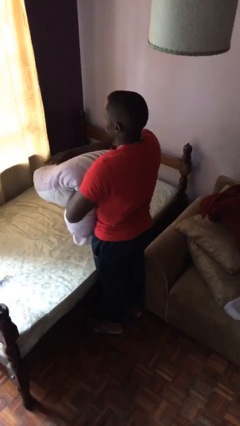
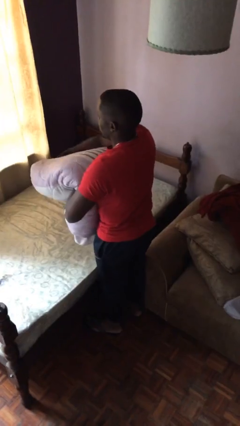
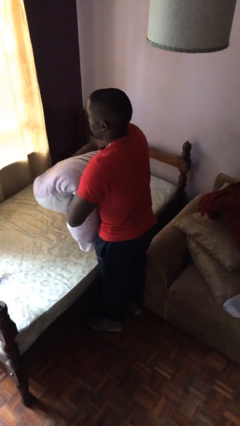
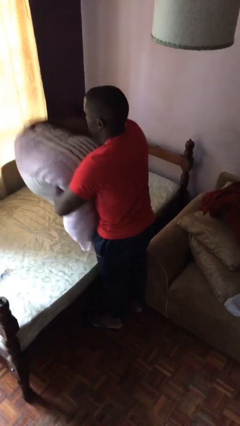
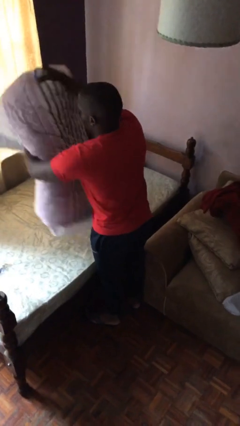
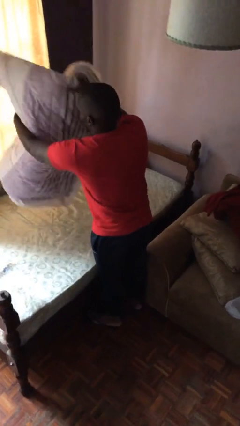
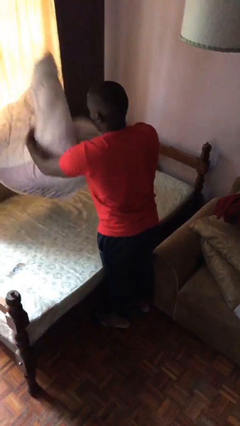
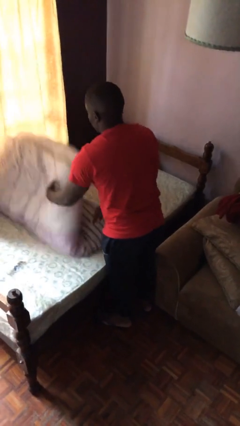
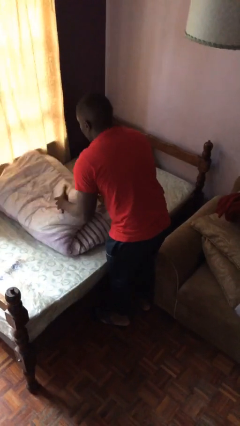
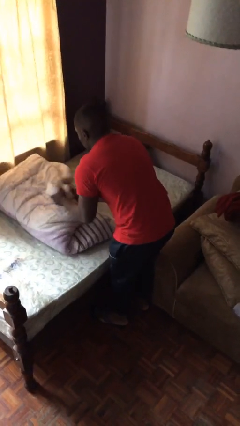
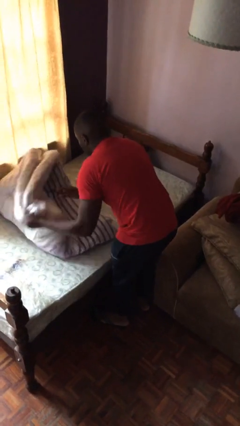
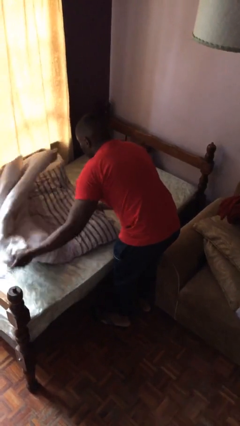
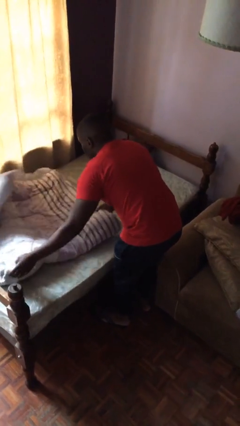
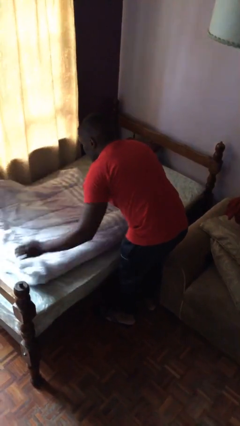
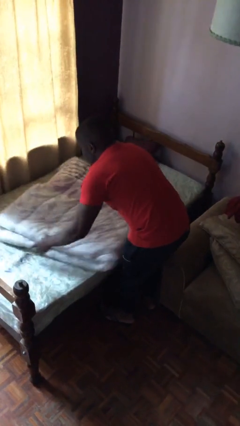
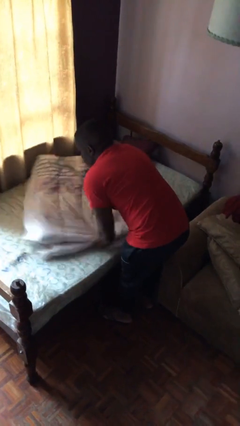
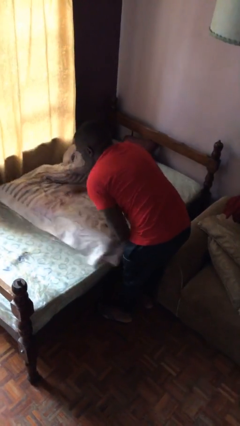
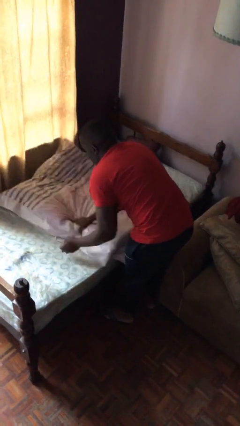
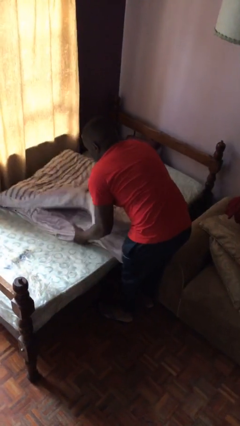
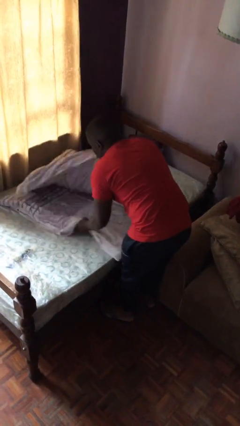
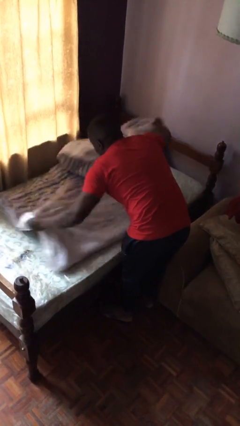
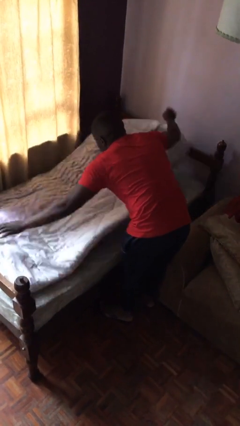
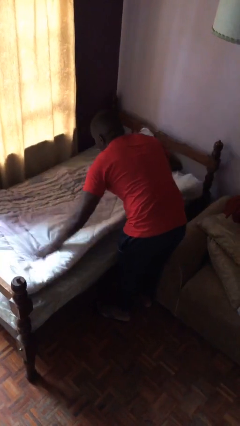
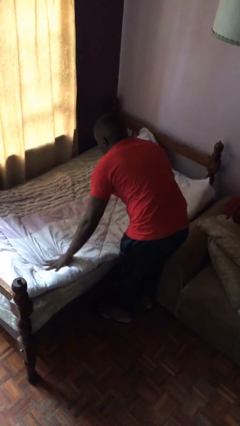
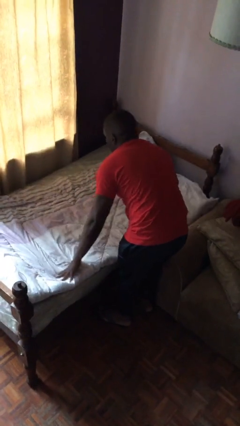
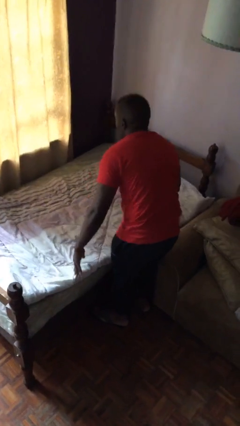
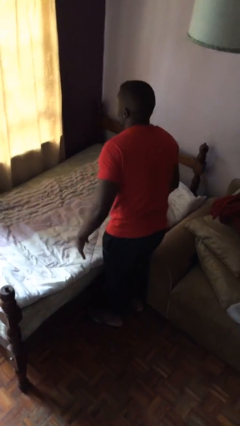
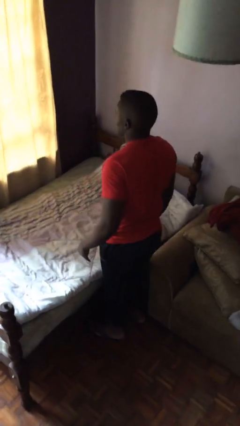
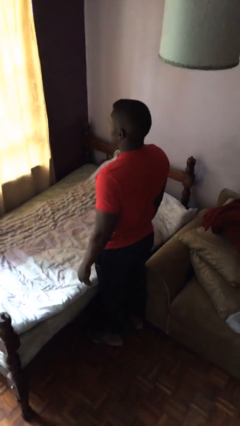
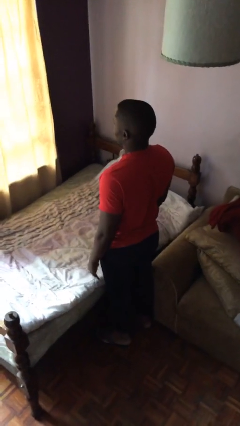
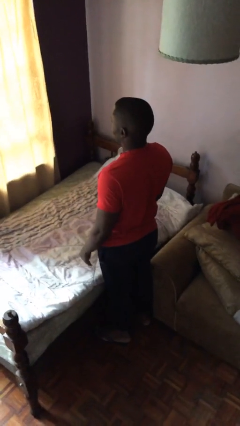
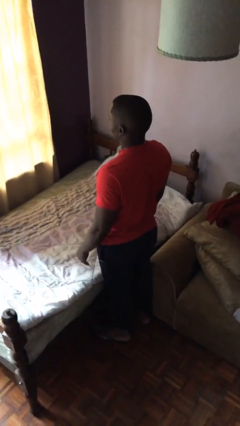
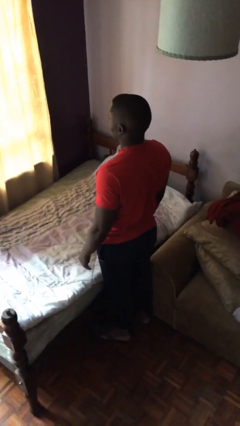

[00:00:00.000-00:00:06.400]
person unfolds blanket

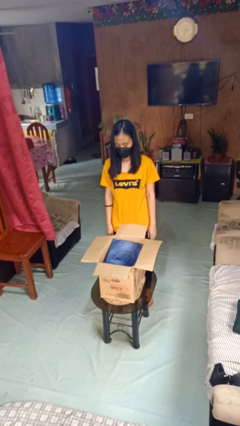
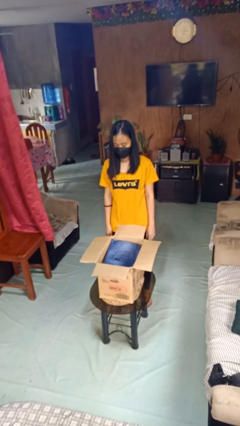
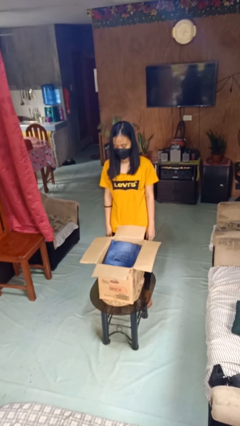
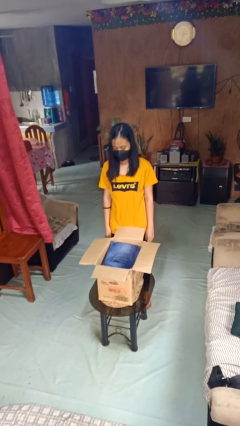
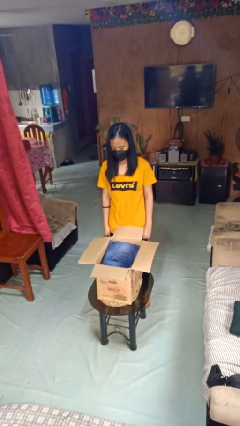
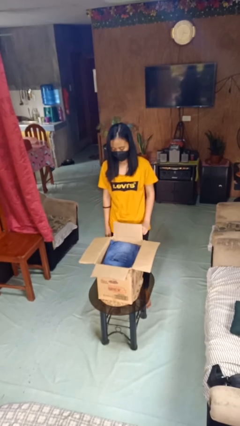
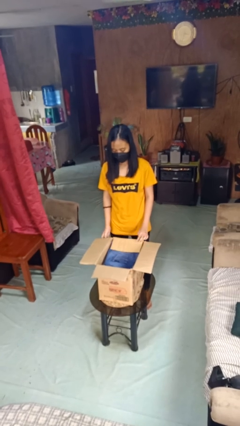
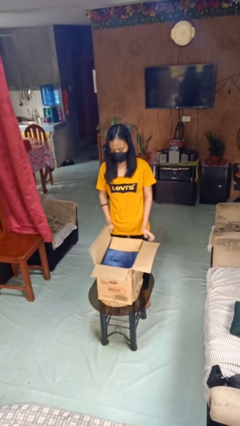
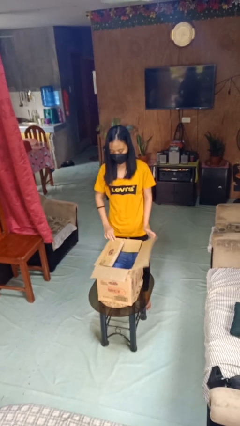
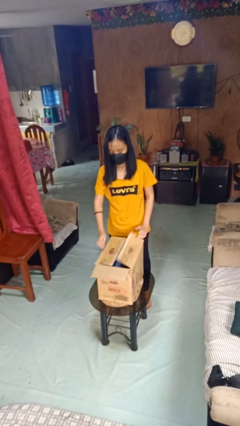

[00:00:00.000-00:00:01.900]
person closes box

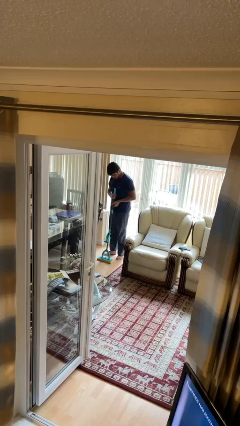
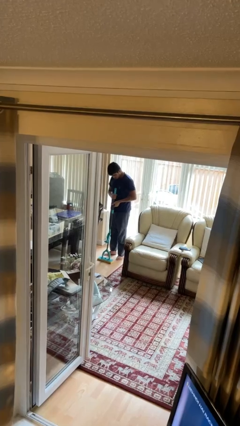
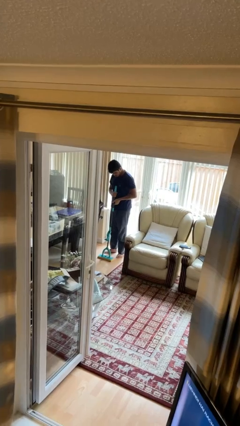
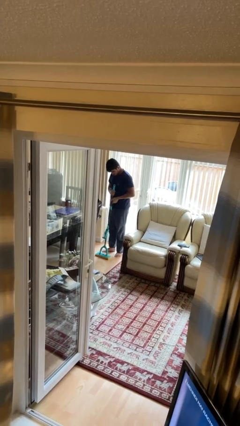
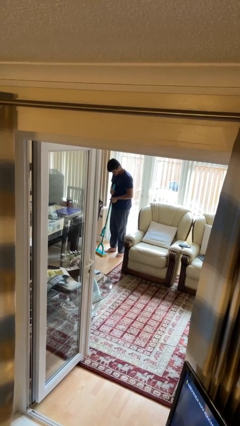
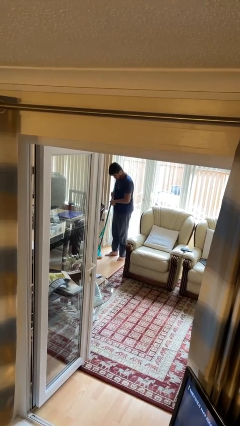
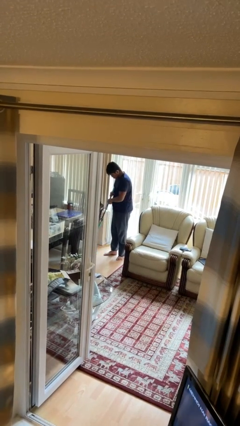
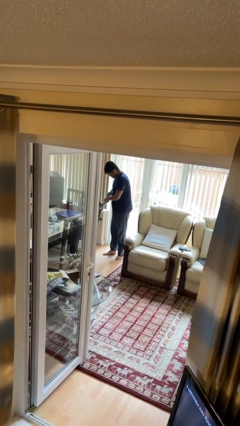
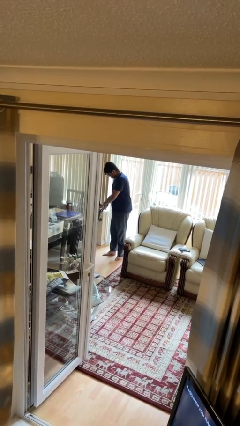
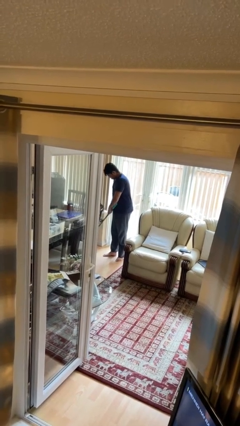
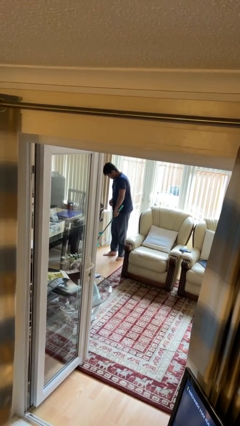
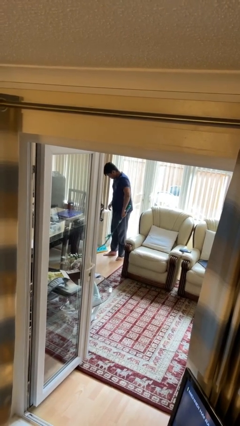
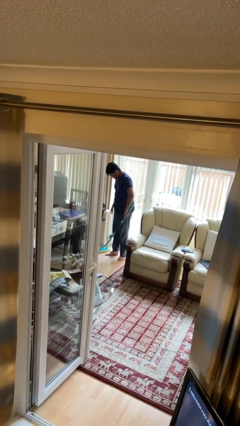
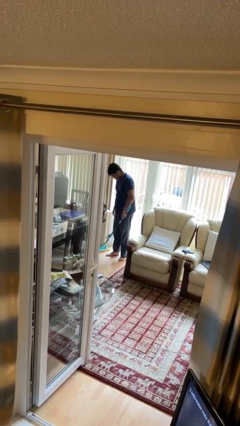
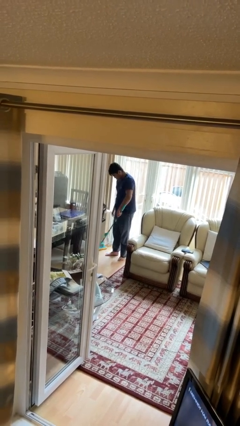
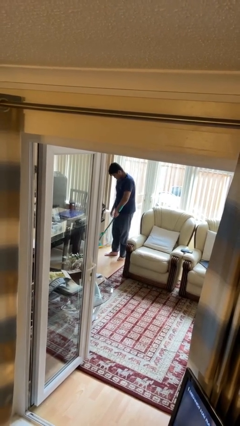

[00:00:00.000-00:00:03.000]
person mops

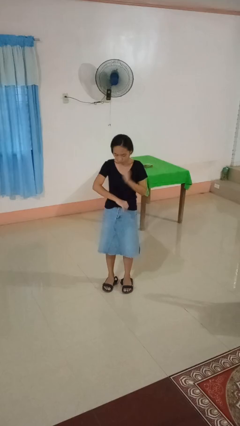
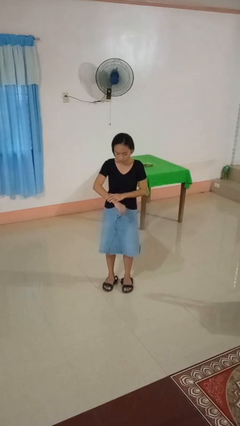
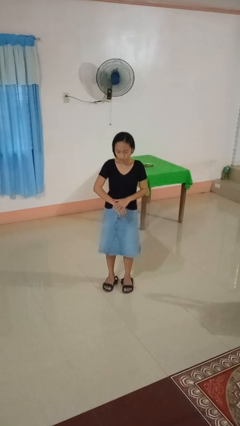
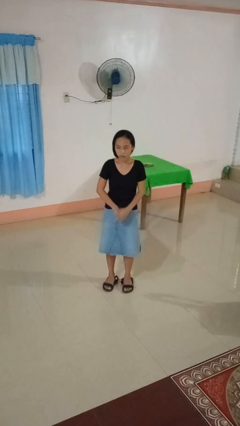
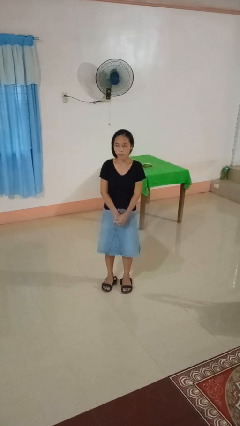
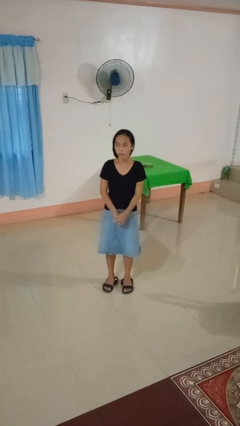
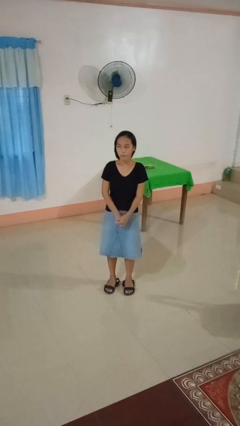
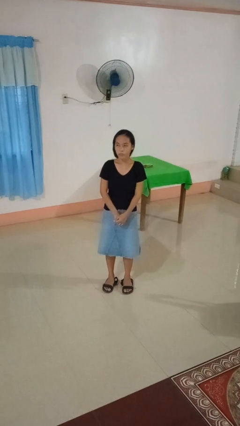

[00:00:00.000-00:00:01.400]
person swats bug

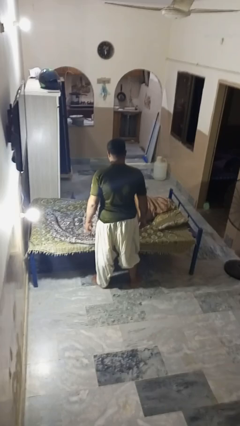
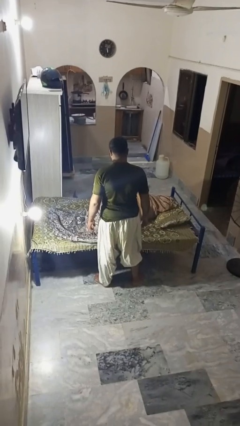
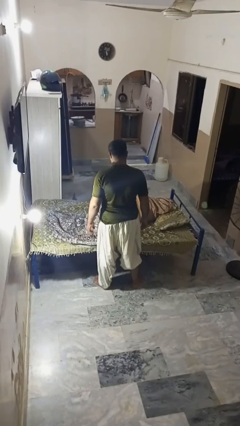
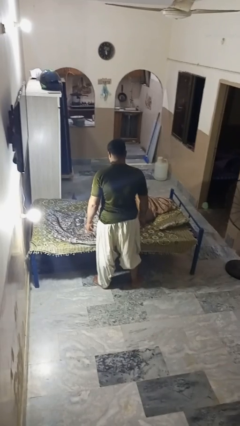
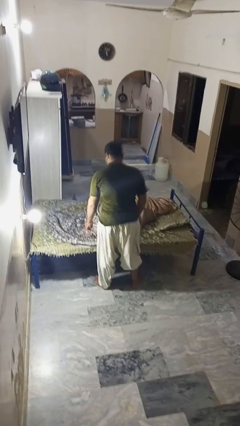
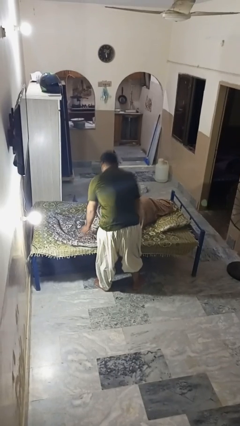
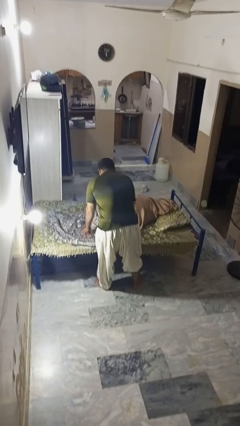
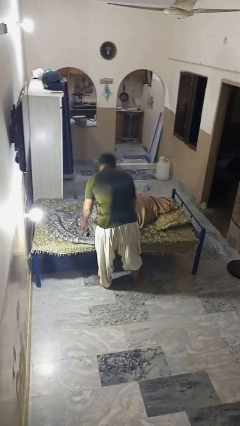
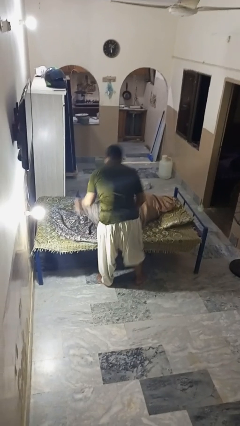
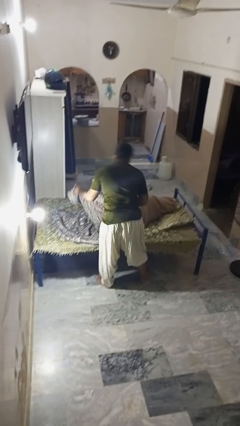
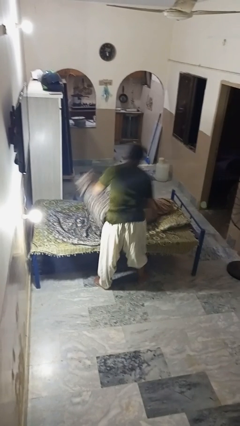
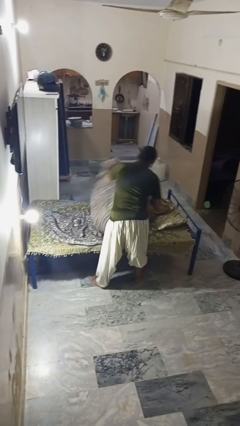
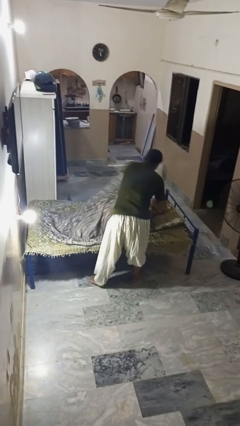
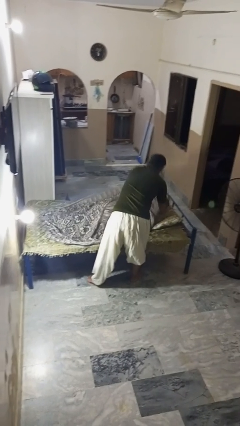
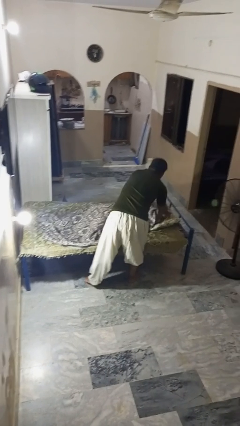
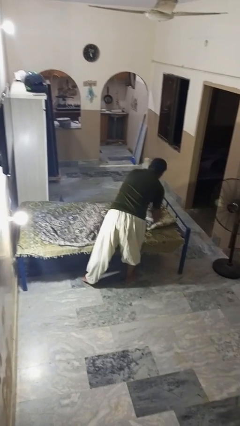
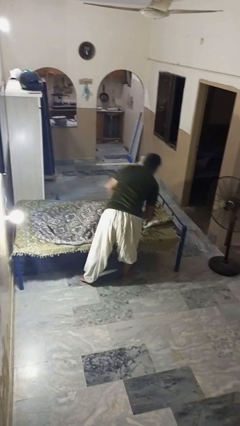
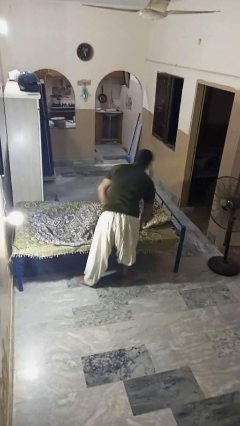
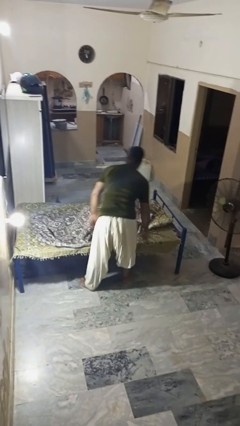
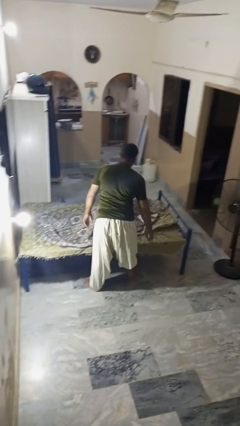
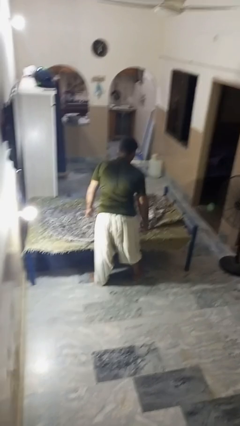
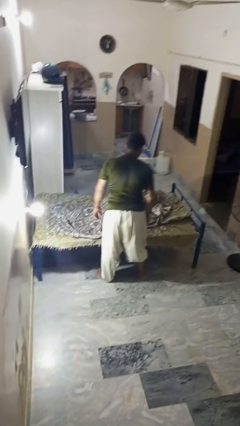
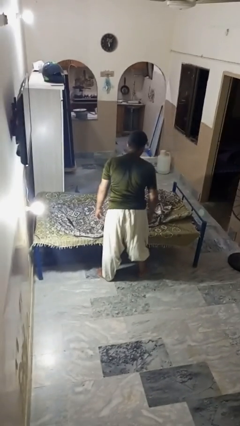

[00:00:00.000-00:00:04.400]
person covers friend with blanket

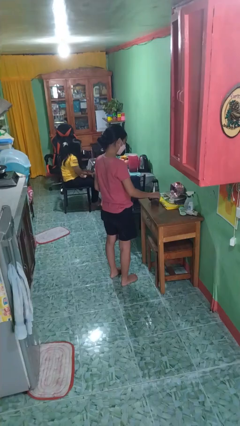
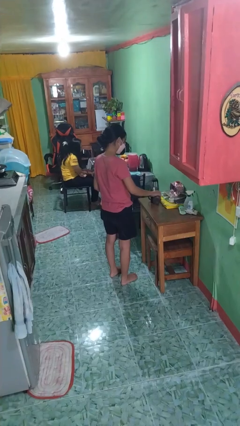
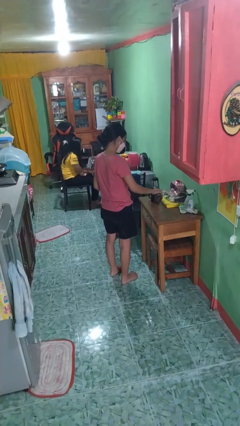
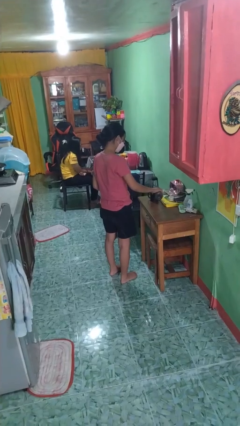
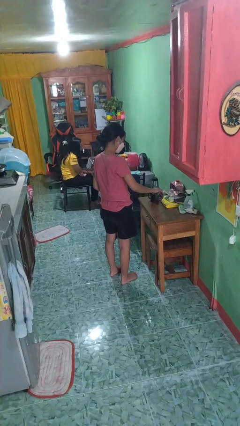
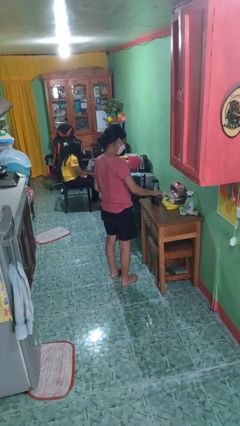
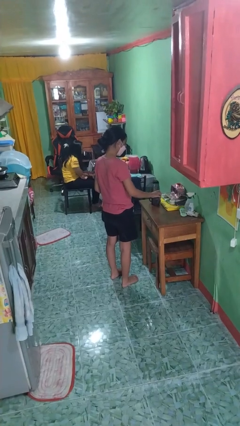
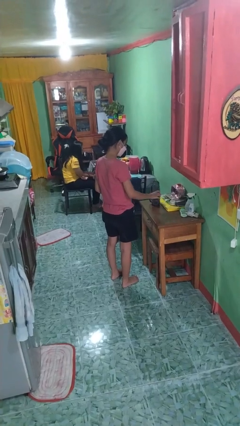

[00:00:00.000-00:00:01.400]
person pours liquid into cup
